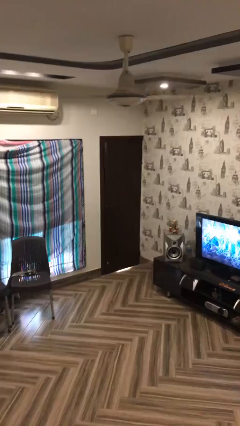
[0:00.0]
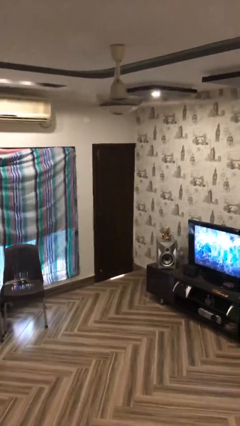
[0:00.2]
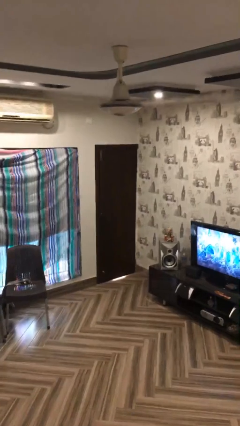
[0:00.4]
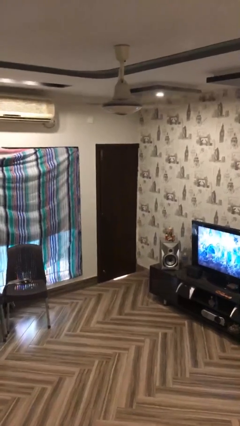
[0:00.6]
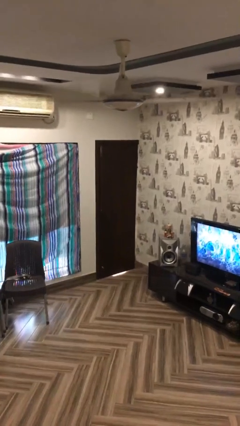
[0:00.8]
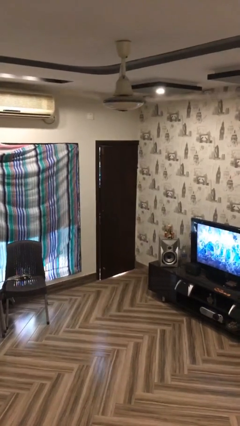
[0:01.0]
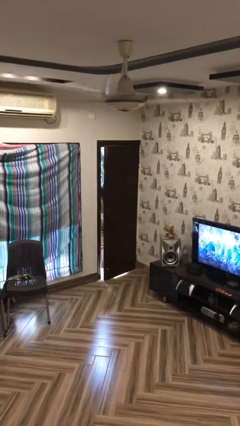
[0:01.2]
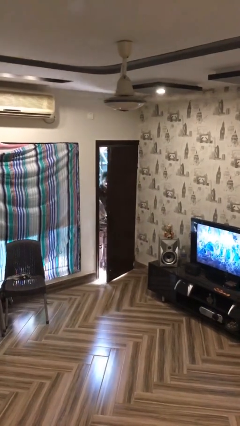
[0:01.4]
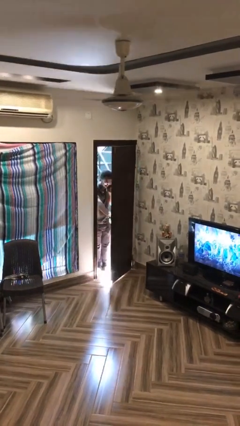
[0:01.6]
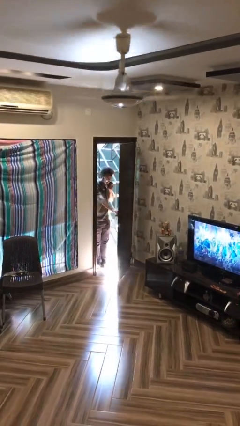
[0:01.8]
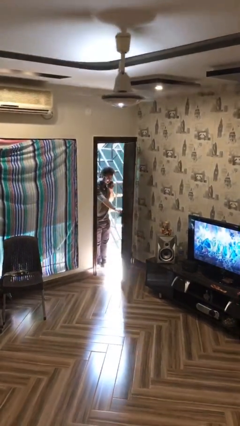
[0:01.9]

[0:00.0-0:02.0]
person opens facility door

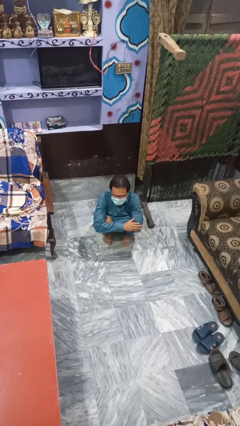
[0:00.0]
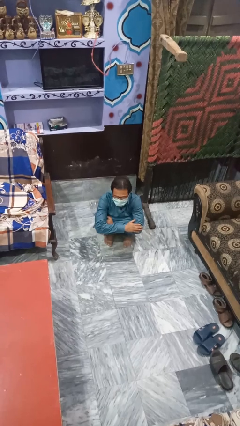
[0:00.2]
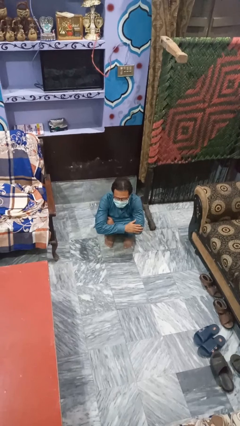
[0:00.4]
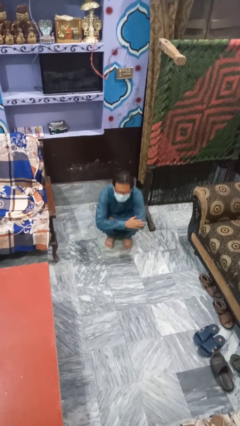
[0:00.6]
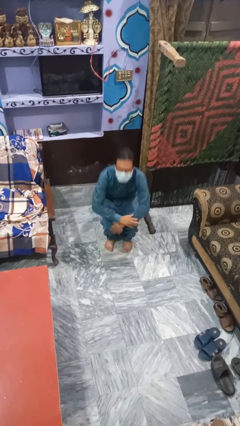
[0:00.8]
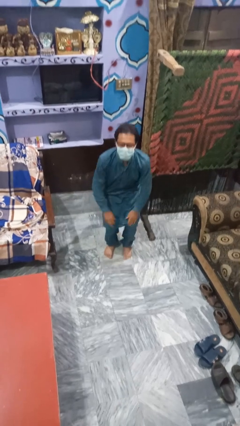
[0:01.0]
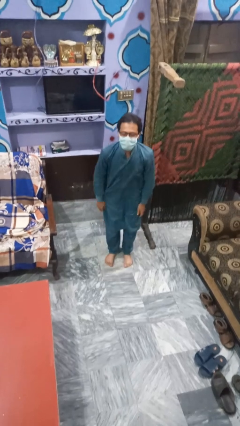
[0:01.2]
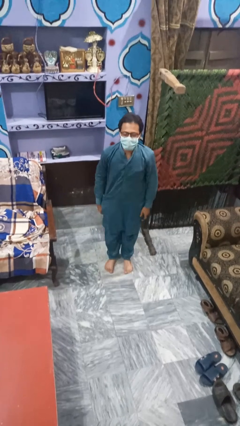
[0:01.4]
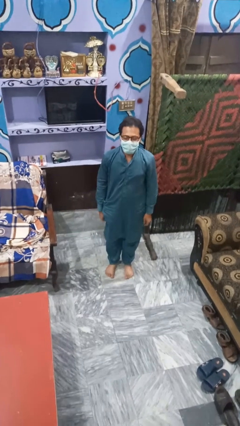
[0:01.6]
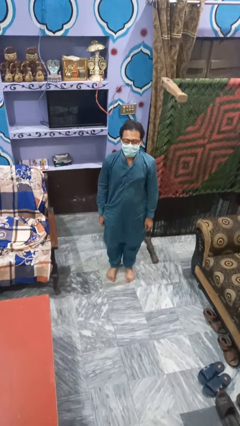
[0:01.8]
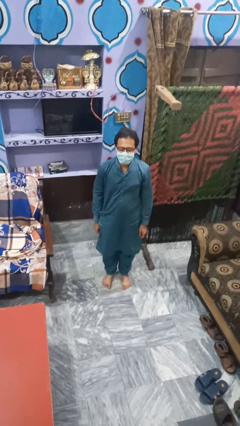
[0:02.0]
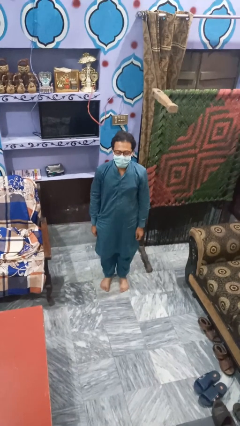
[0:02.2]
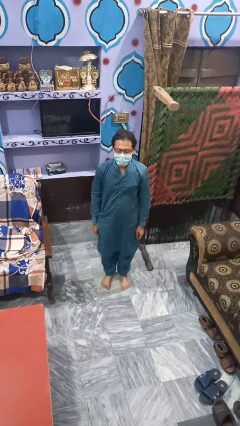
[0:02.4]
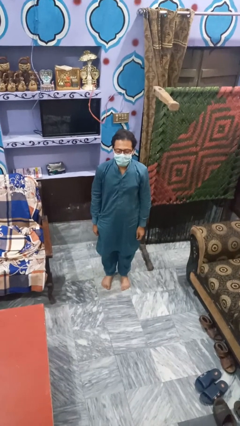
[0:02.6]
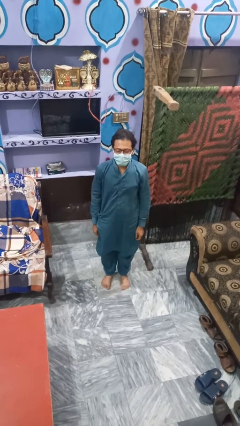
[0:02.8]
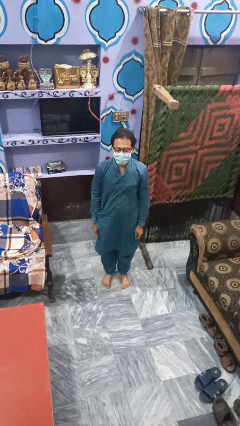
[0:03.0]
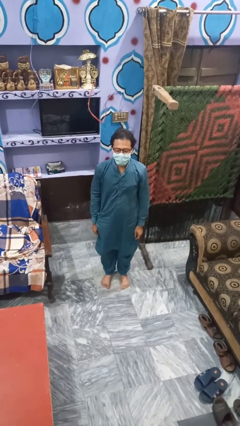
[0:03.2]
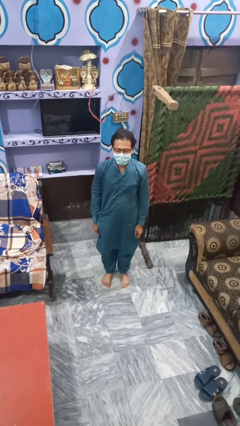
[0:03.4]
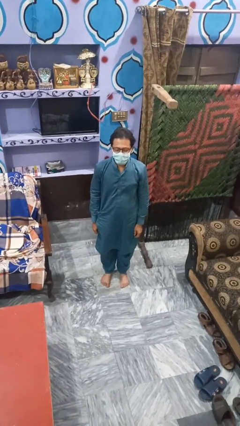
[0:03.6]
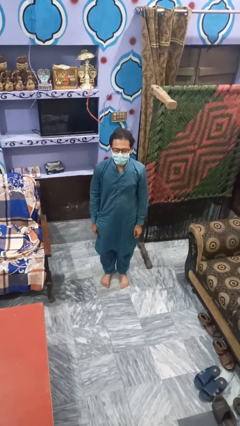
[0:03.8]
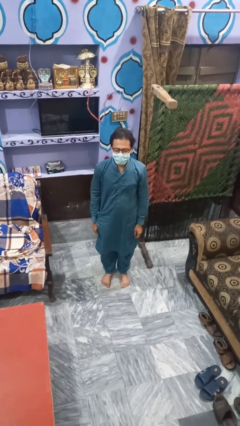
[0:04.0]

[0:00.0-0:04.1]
person stands up

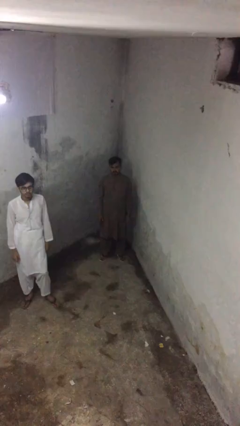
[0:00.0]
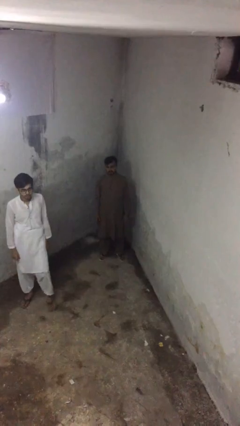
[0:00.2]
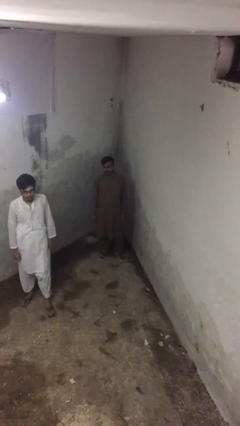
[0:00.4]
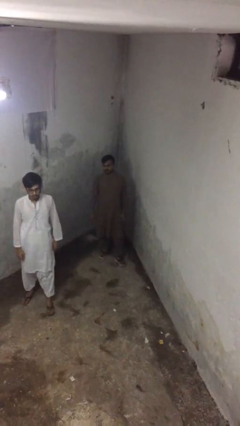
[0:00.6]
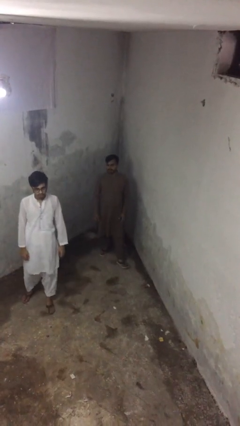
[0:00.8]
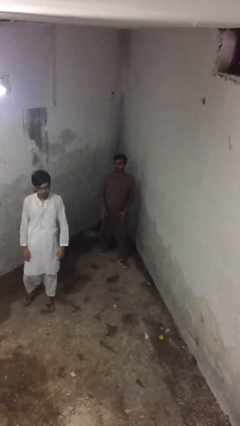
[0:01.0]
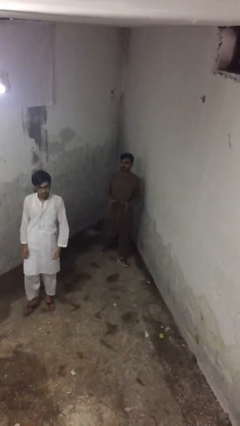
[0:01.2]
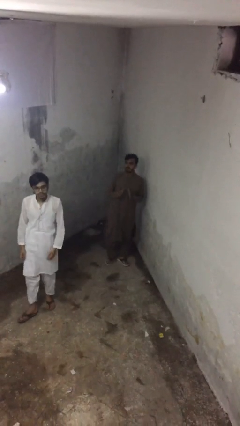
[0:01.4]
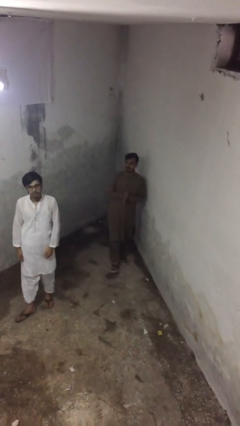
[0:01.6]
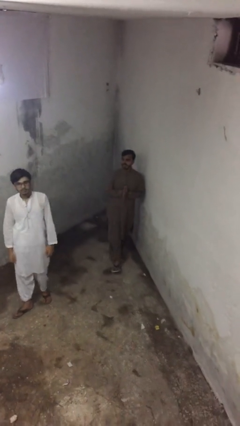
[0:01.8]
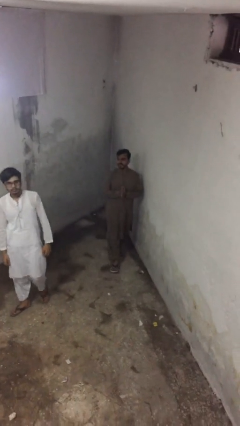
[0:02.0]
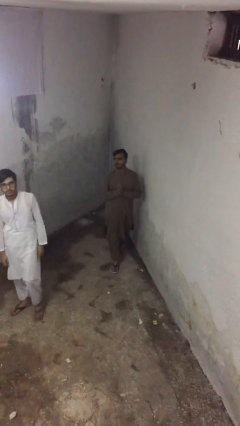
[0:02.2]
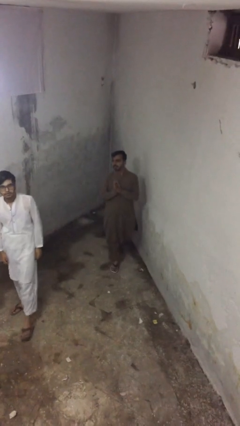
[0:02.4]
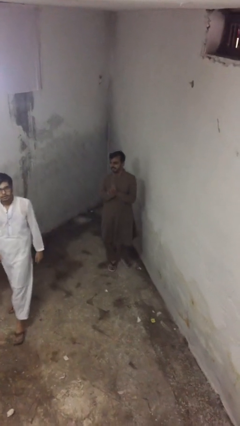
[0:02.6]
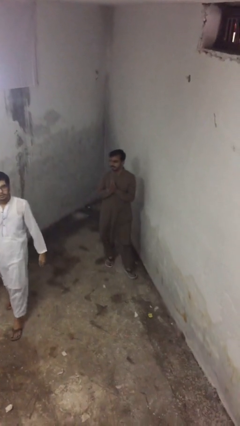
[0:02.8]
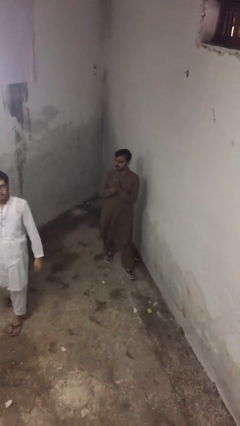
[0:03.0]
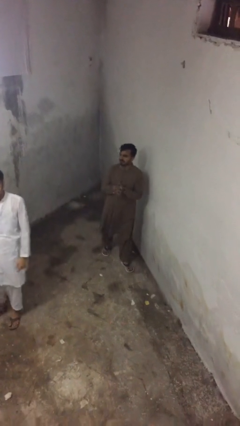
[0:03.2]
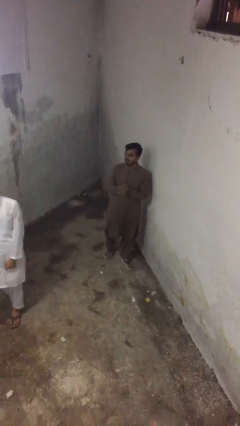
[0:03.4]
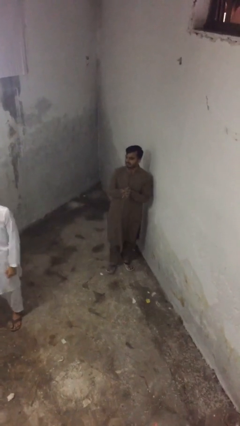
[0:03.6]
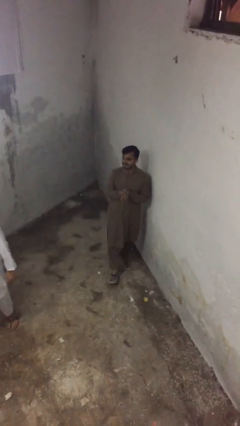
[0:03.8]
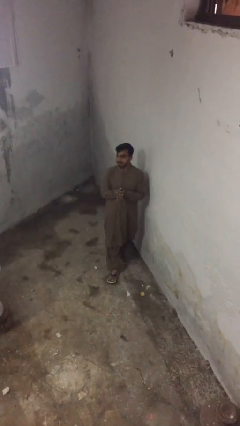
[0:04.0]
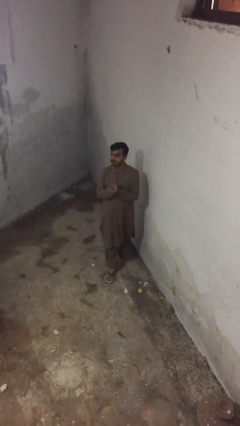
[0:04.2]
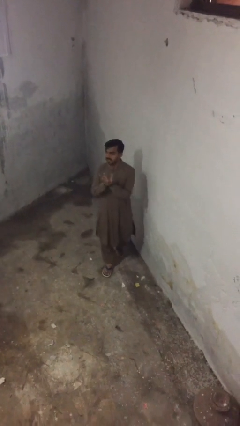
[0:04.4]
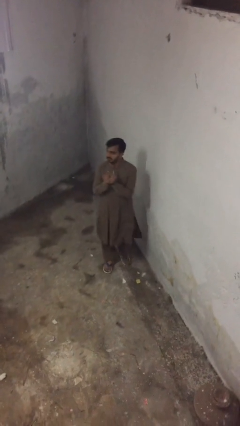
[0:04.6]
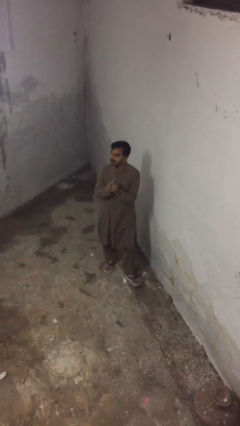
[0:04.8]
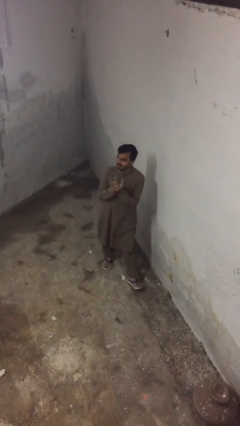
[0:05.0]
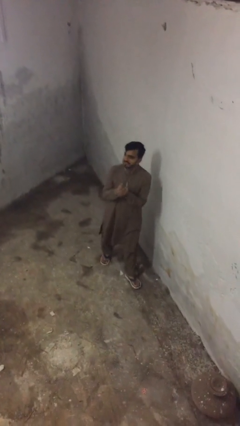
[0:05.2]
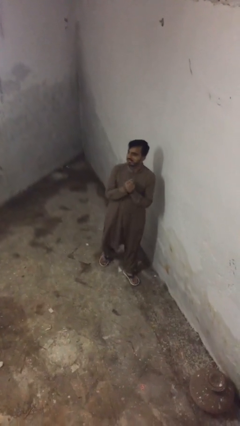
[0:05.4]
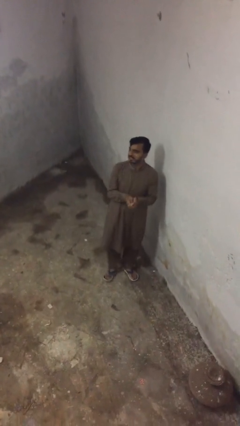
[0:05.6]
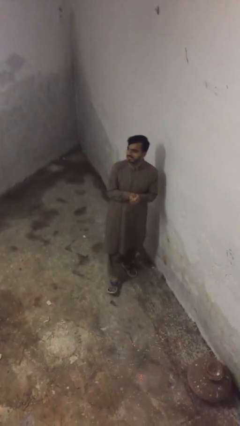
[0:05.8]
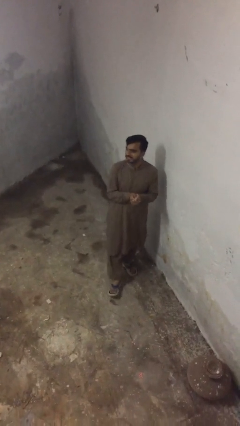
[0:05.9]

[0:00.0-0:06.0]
person talks to person

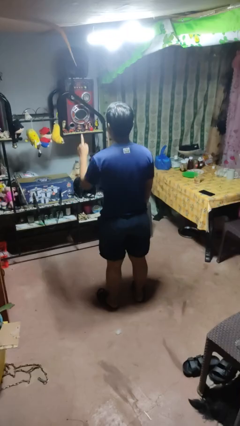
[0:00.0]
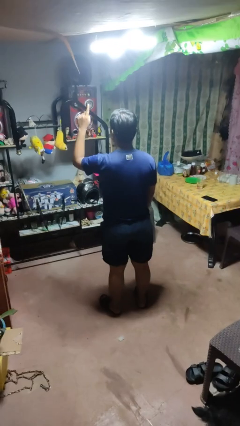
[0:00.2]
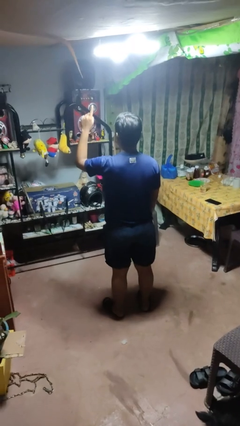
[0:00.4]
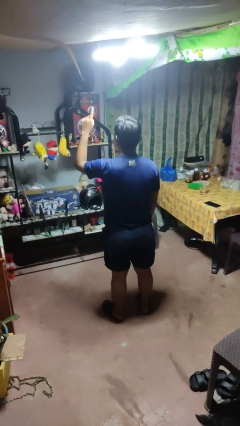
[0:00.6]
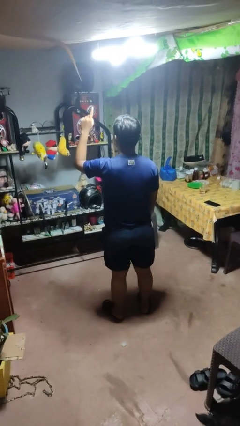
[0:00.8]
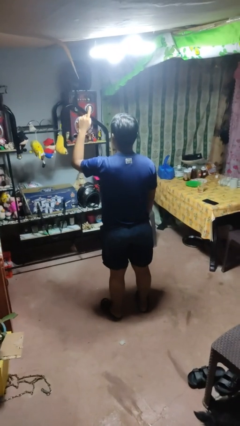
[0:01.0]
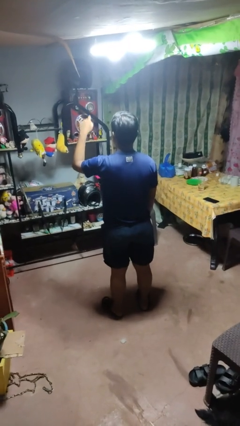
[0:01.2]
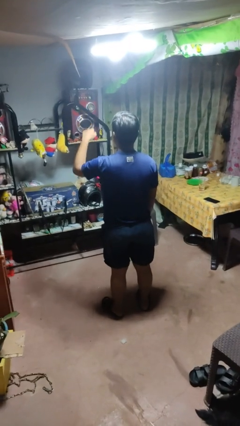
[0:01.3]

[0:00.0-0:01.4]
person gestures number one

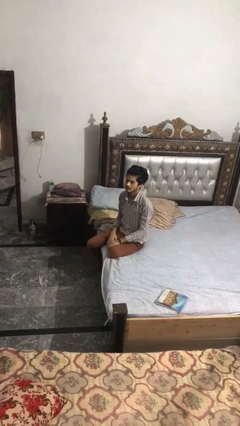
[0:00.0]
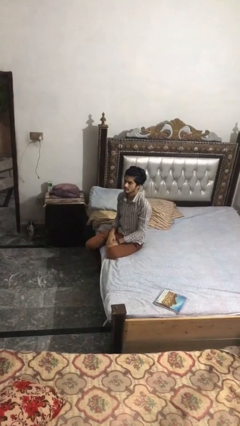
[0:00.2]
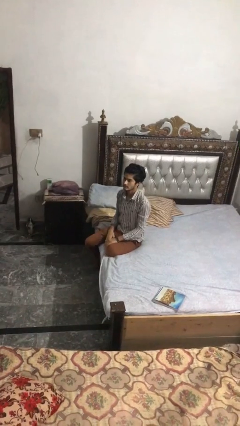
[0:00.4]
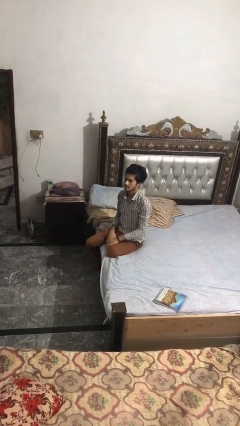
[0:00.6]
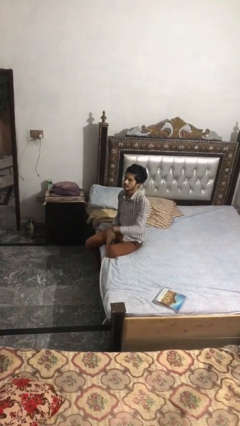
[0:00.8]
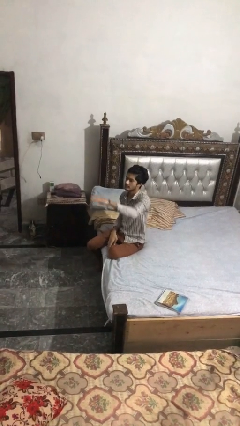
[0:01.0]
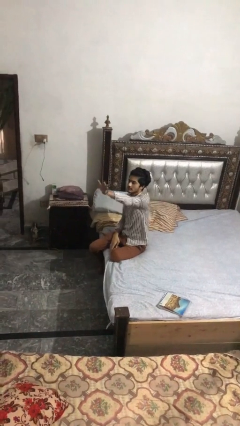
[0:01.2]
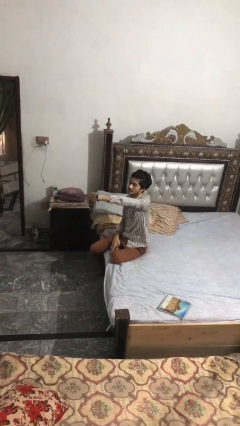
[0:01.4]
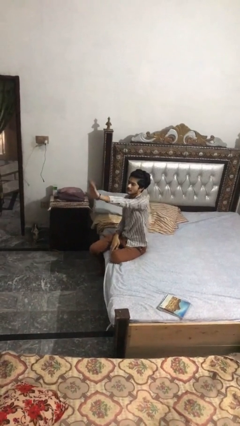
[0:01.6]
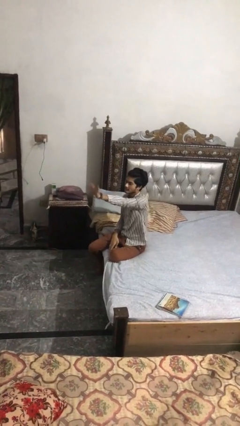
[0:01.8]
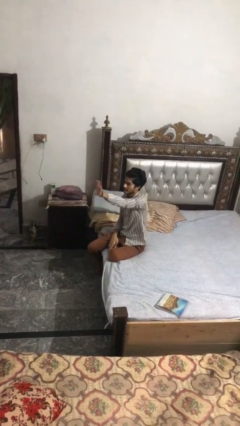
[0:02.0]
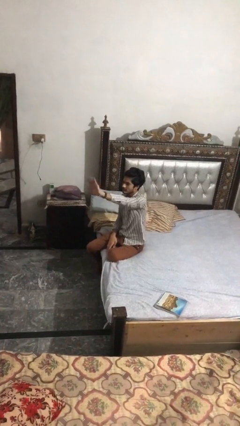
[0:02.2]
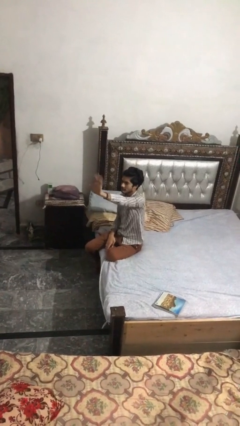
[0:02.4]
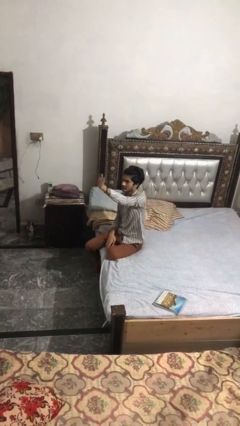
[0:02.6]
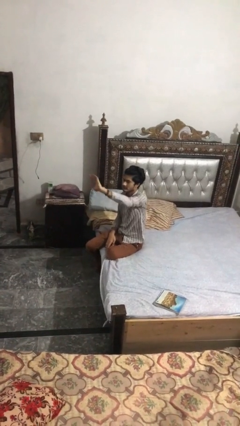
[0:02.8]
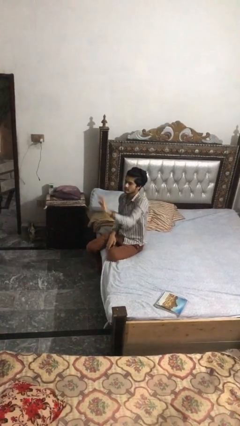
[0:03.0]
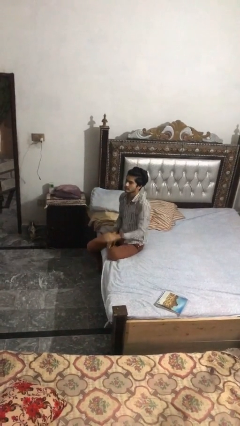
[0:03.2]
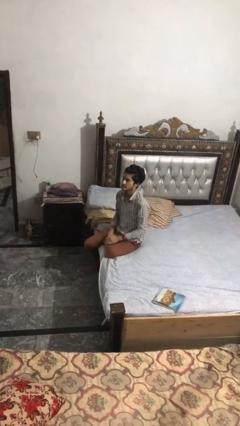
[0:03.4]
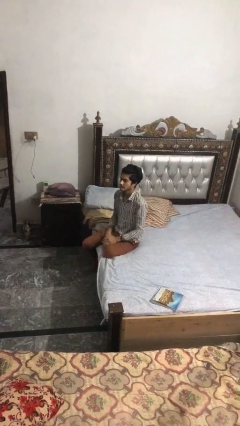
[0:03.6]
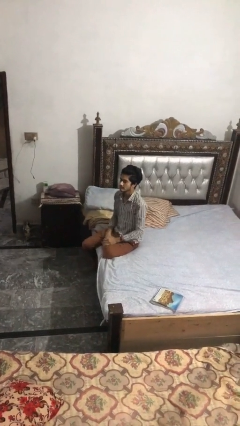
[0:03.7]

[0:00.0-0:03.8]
person waves at person
